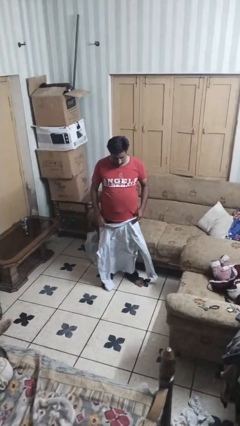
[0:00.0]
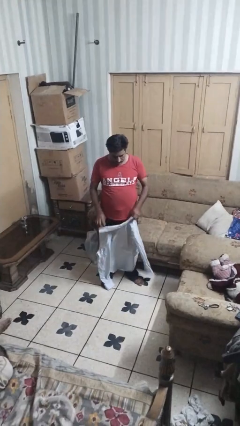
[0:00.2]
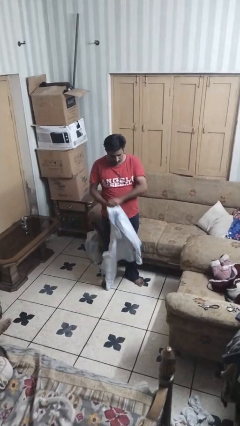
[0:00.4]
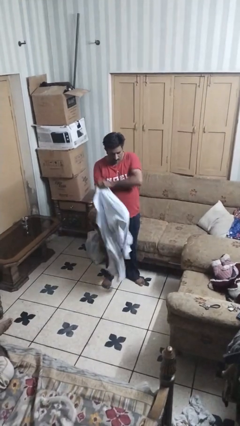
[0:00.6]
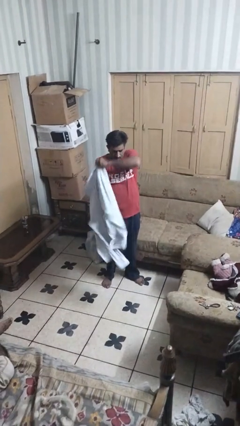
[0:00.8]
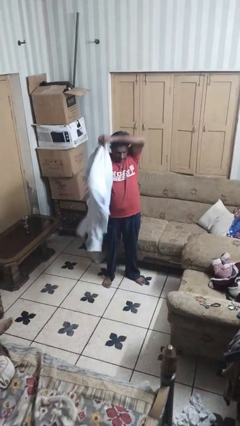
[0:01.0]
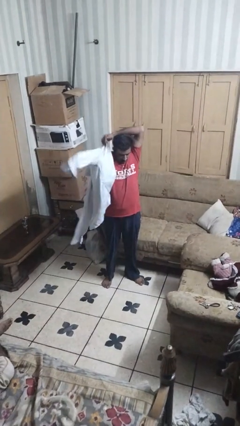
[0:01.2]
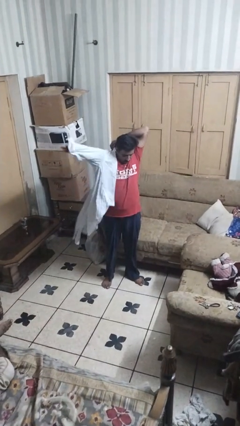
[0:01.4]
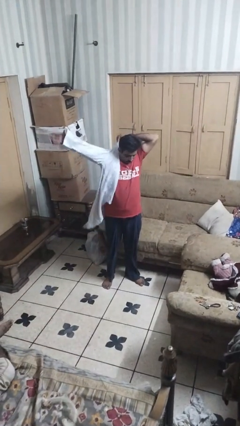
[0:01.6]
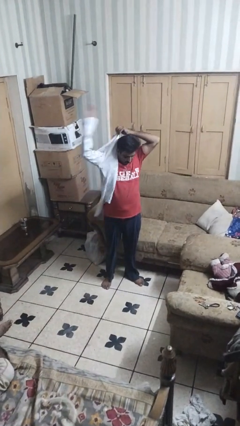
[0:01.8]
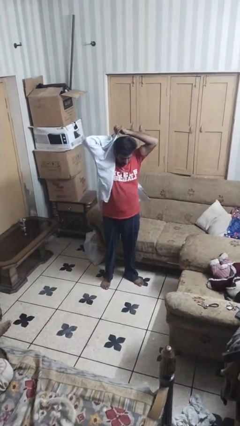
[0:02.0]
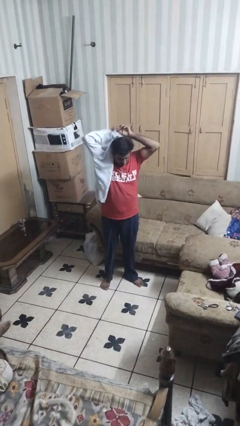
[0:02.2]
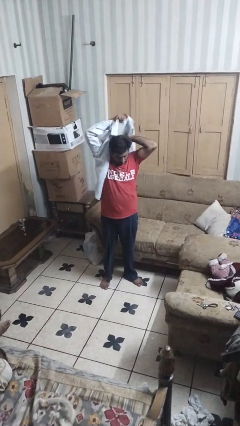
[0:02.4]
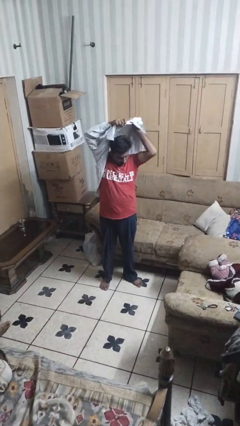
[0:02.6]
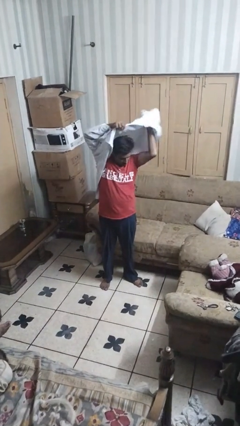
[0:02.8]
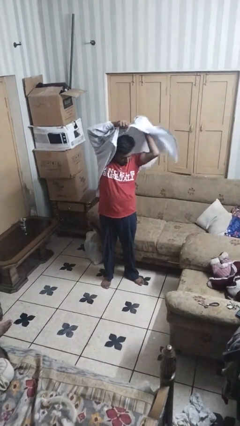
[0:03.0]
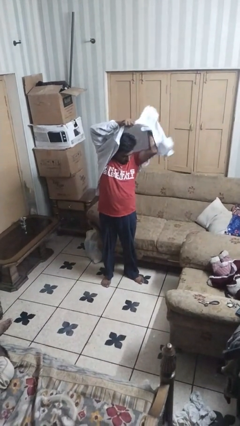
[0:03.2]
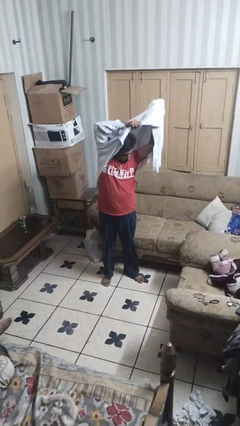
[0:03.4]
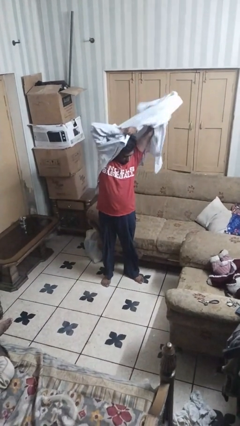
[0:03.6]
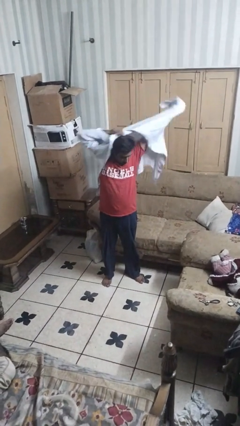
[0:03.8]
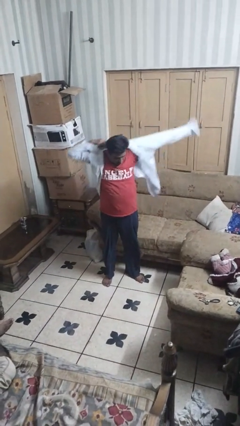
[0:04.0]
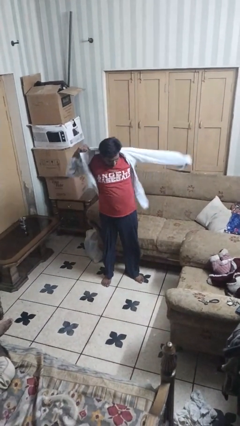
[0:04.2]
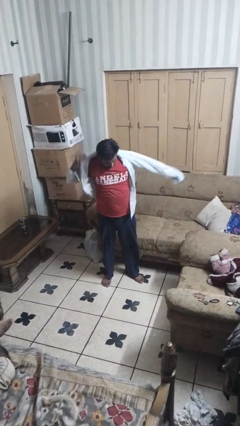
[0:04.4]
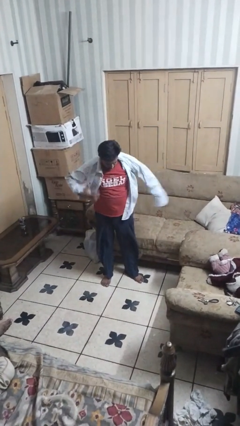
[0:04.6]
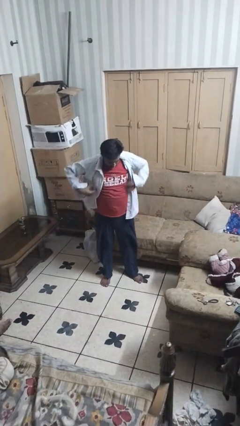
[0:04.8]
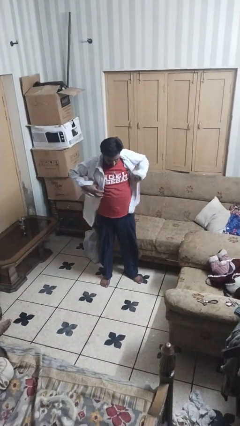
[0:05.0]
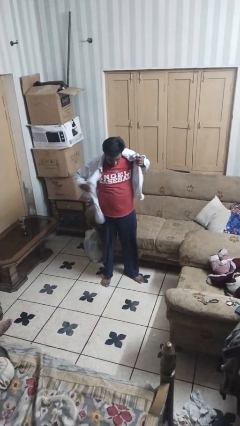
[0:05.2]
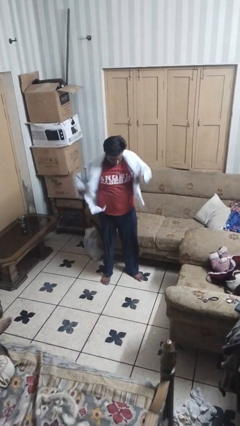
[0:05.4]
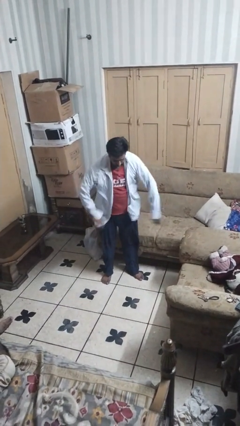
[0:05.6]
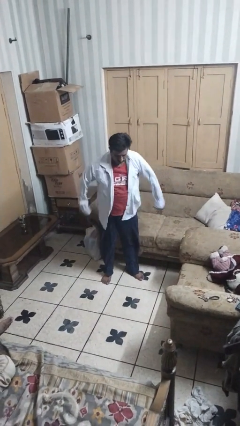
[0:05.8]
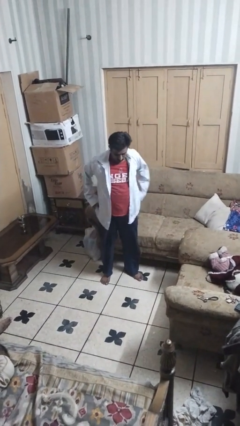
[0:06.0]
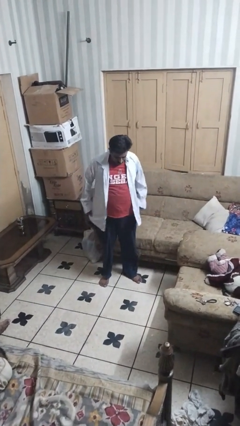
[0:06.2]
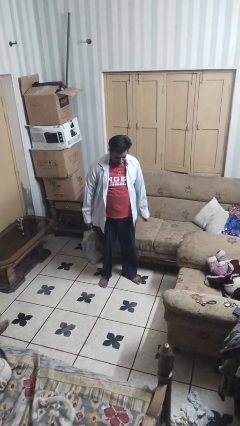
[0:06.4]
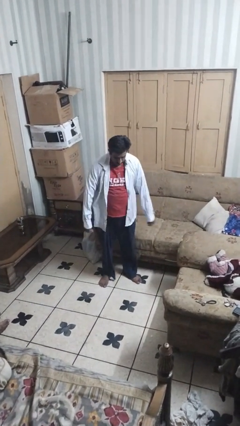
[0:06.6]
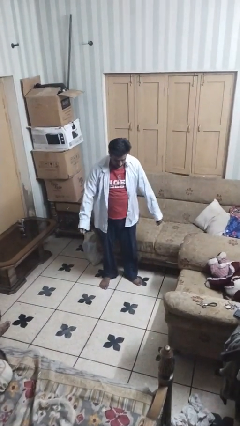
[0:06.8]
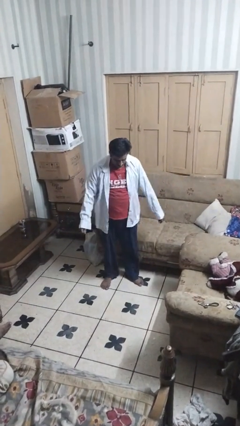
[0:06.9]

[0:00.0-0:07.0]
person puts on shirt

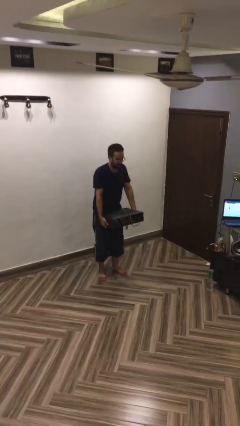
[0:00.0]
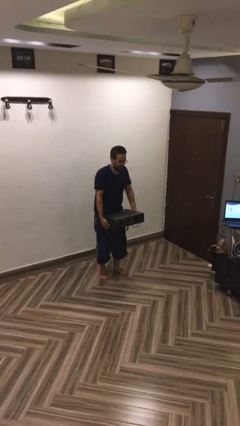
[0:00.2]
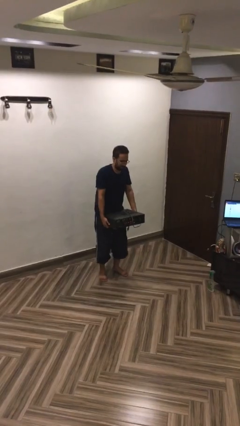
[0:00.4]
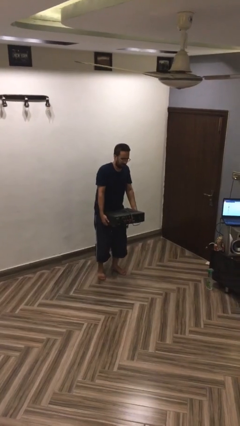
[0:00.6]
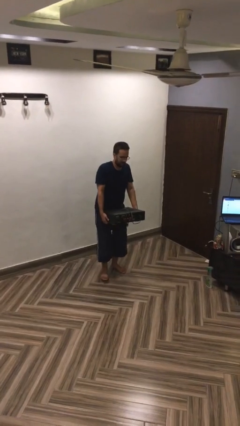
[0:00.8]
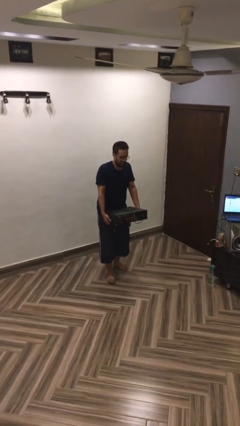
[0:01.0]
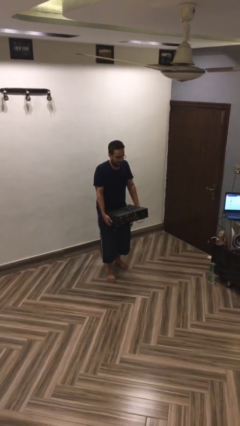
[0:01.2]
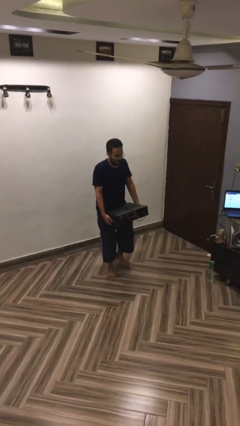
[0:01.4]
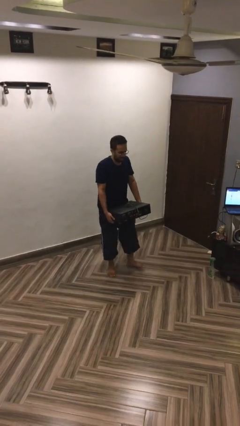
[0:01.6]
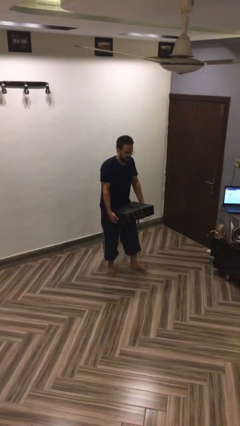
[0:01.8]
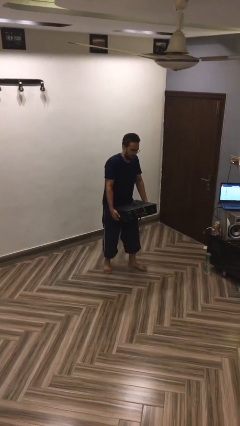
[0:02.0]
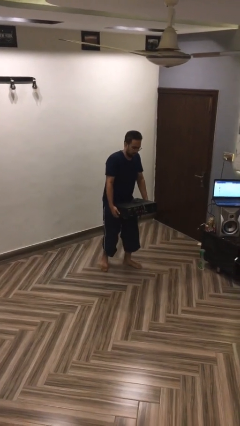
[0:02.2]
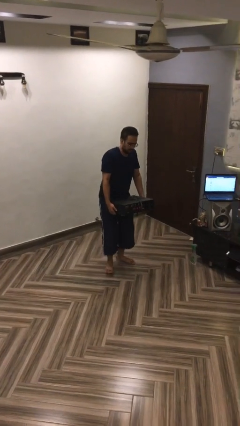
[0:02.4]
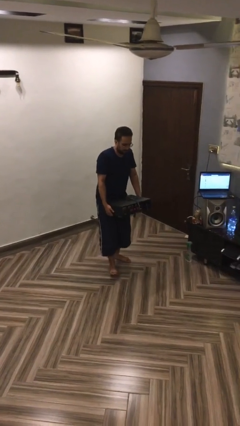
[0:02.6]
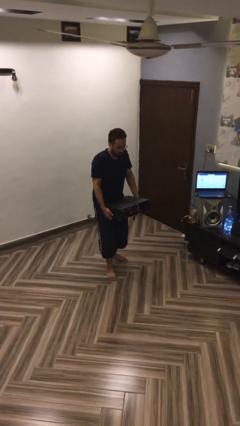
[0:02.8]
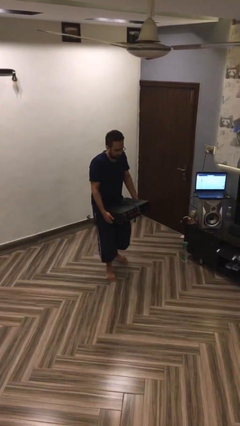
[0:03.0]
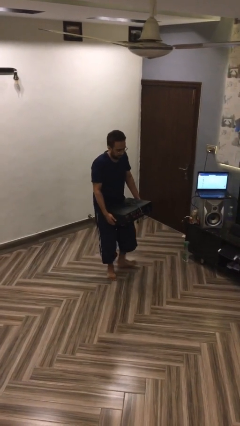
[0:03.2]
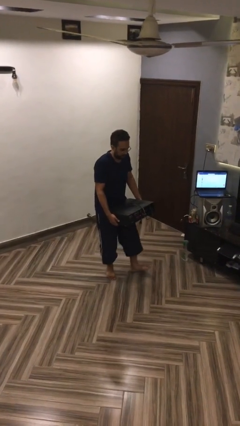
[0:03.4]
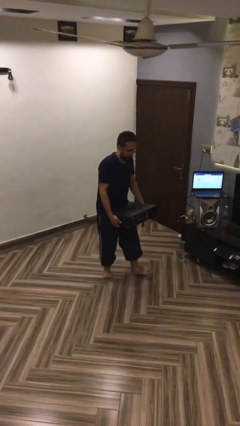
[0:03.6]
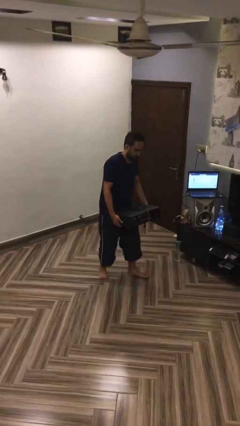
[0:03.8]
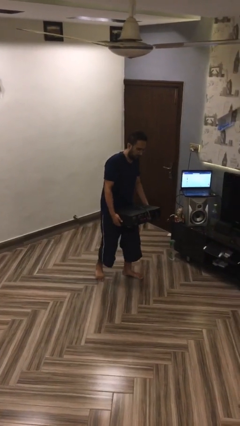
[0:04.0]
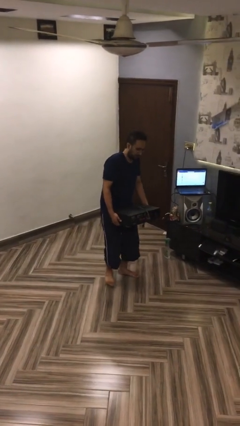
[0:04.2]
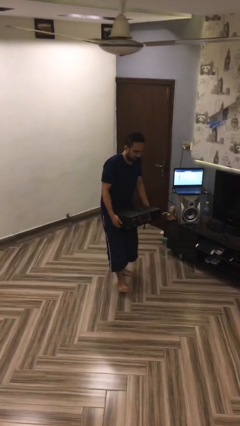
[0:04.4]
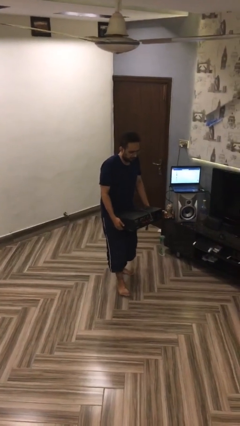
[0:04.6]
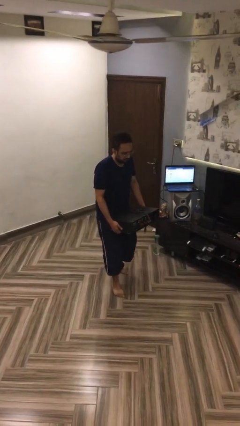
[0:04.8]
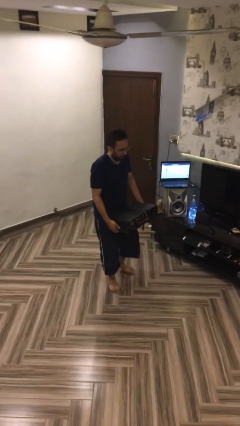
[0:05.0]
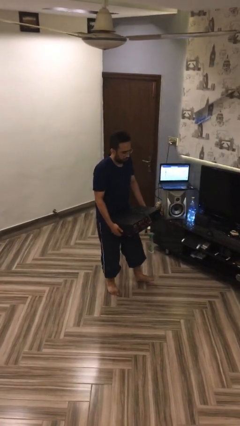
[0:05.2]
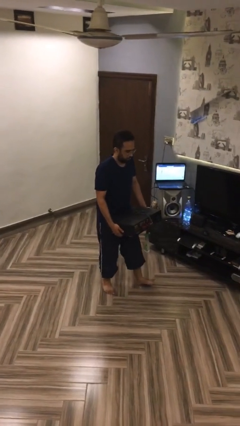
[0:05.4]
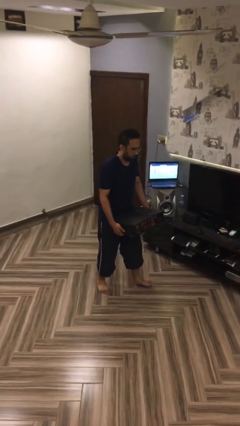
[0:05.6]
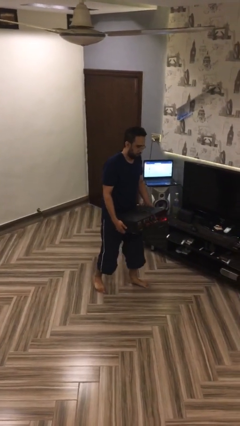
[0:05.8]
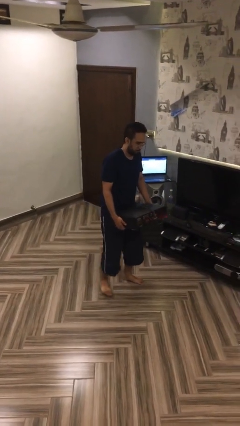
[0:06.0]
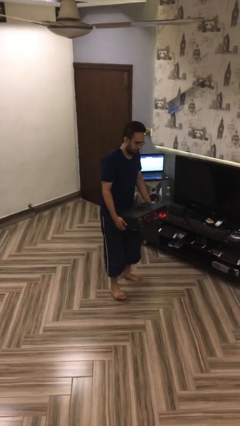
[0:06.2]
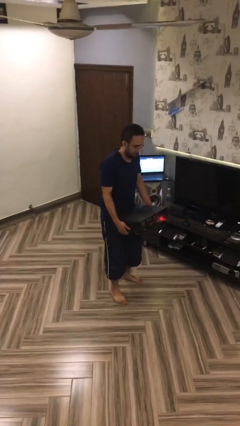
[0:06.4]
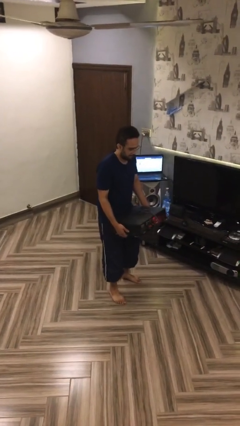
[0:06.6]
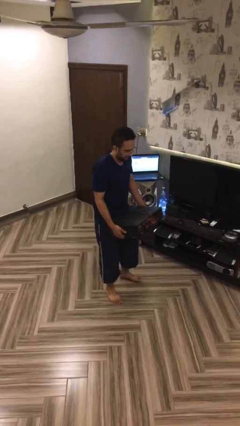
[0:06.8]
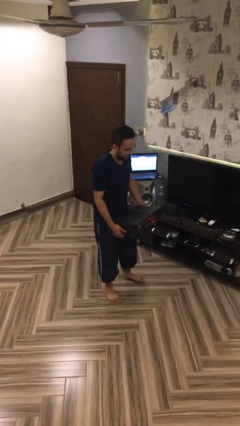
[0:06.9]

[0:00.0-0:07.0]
person carries heavy object

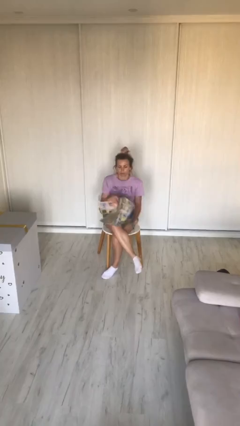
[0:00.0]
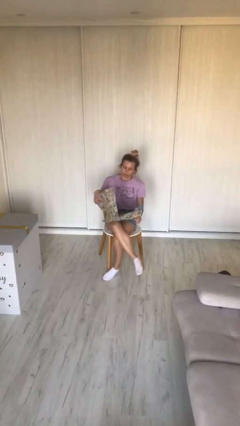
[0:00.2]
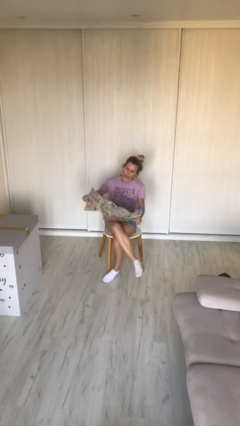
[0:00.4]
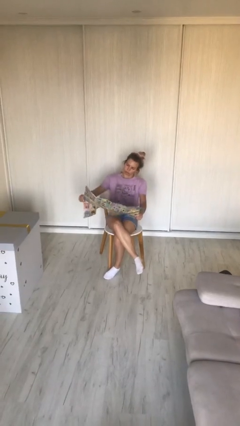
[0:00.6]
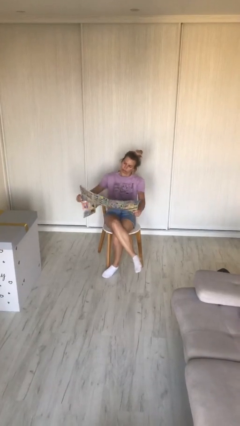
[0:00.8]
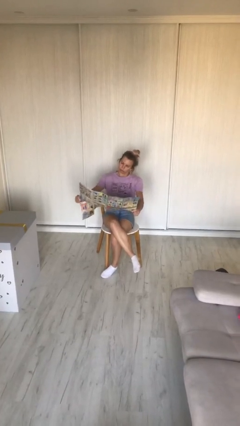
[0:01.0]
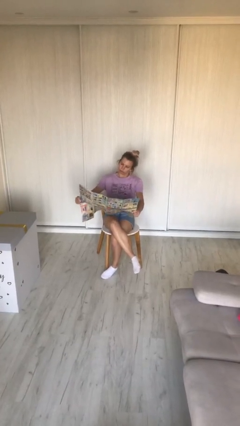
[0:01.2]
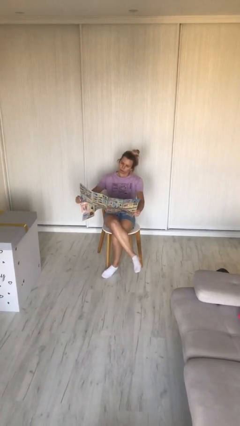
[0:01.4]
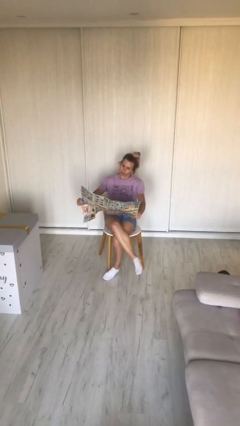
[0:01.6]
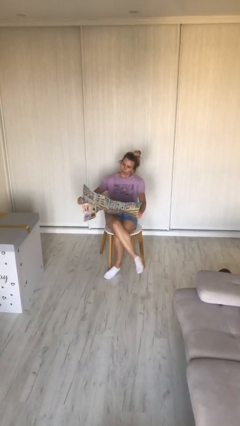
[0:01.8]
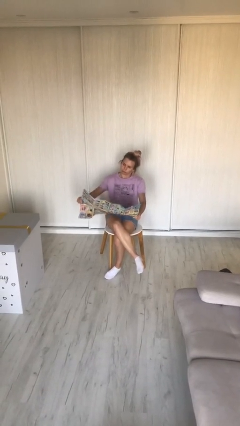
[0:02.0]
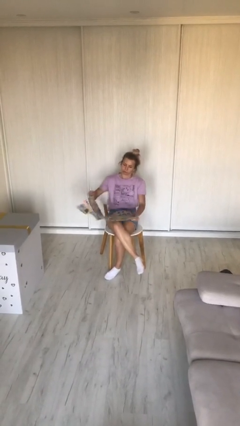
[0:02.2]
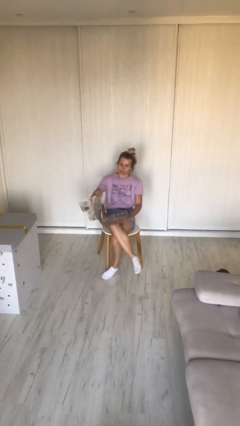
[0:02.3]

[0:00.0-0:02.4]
person reads newspaper

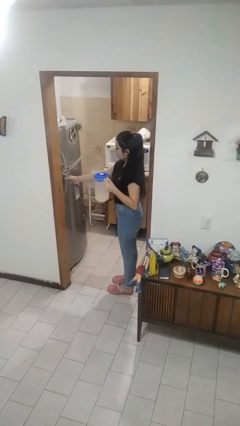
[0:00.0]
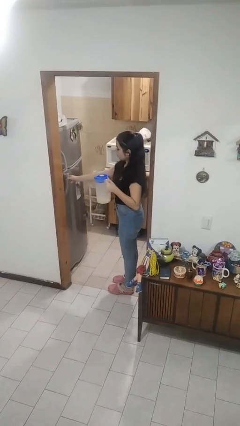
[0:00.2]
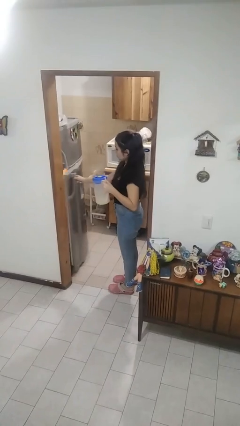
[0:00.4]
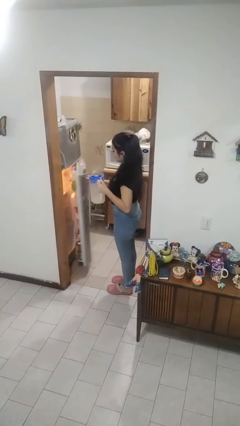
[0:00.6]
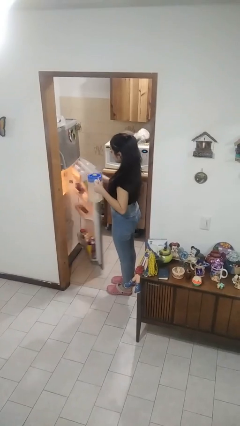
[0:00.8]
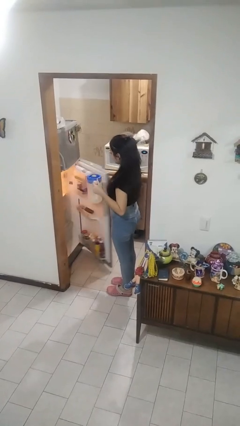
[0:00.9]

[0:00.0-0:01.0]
person opens refrigerator

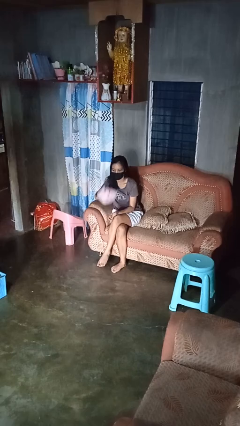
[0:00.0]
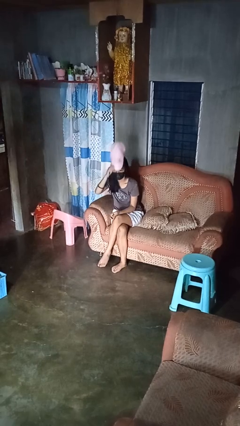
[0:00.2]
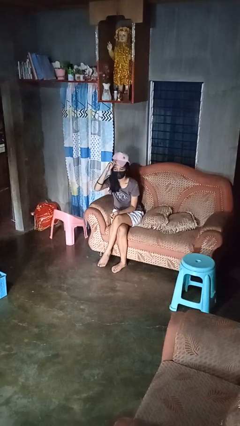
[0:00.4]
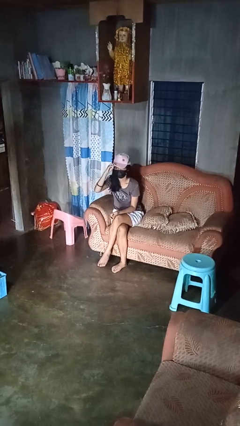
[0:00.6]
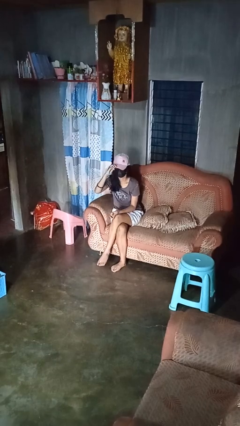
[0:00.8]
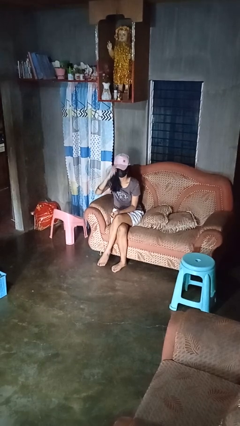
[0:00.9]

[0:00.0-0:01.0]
person puts on hat
